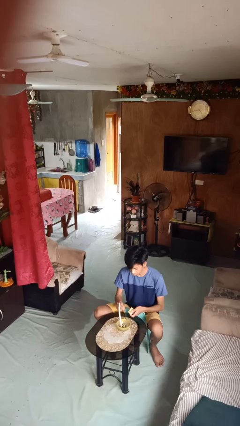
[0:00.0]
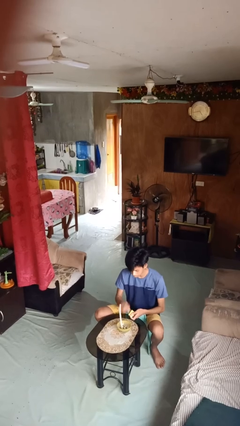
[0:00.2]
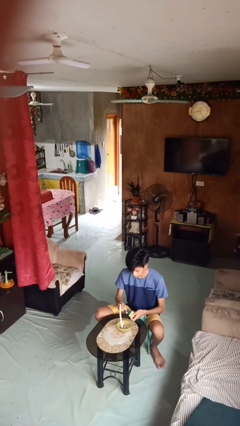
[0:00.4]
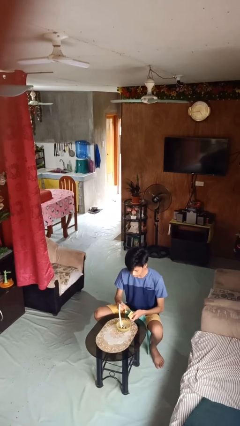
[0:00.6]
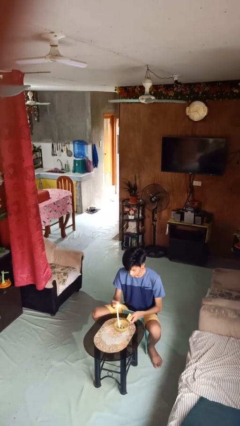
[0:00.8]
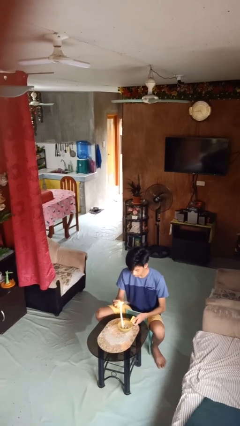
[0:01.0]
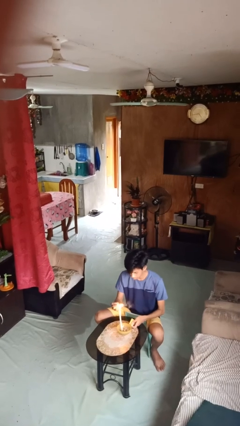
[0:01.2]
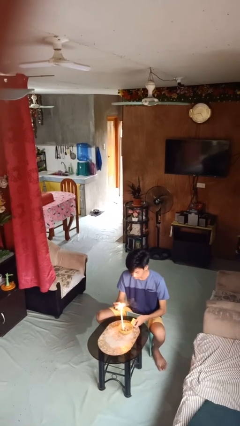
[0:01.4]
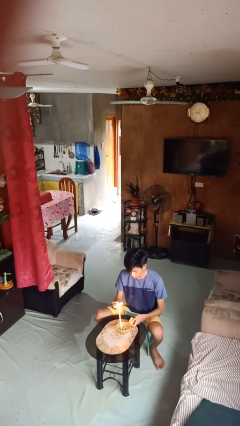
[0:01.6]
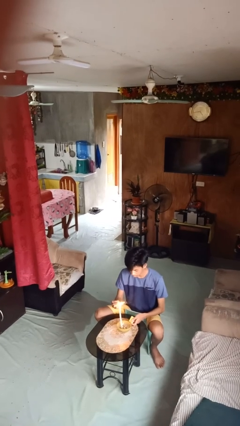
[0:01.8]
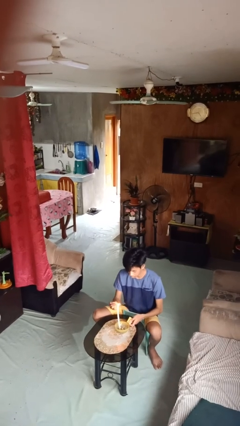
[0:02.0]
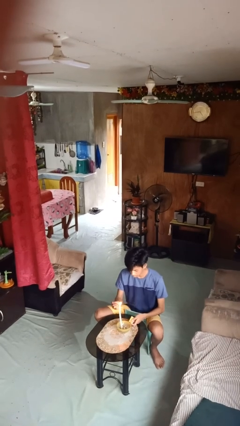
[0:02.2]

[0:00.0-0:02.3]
person lights candle

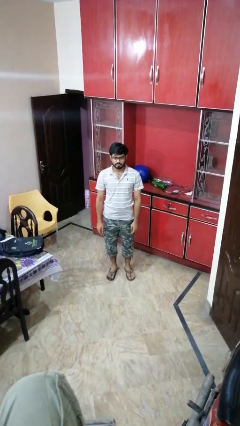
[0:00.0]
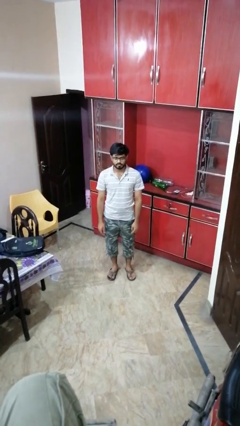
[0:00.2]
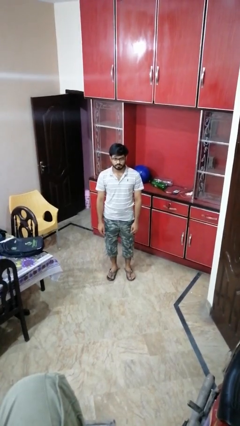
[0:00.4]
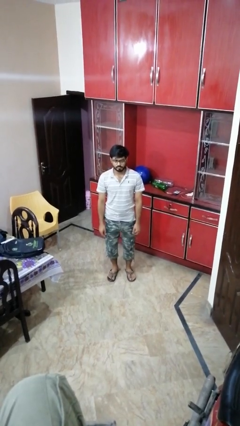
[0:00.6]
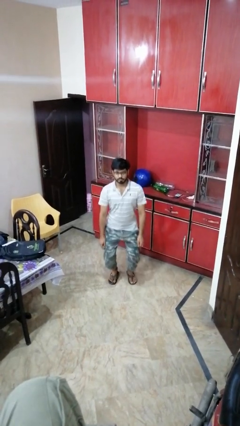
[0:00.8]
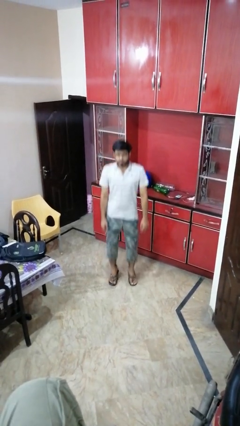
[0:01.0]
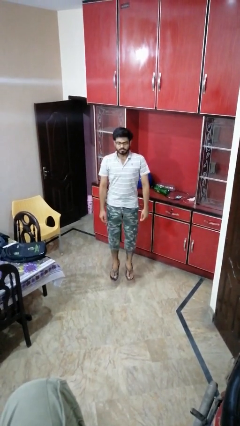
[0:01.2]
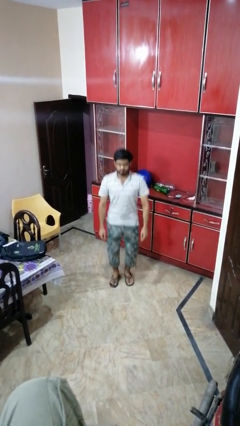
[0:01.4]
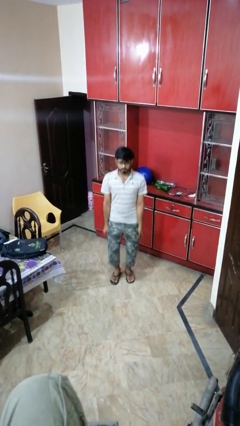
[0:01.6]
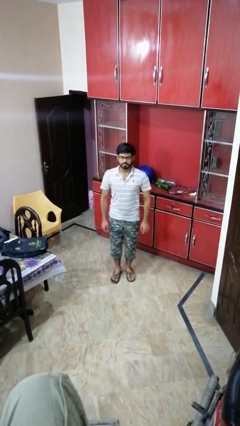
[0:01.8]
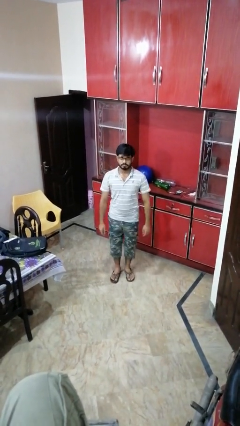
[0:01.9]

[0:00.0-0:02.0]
person jumps

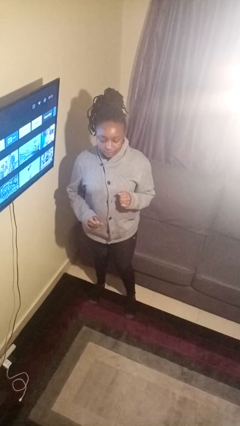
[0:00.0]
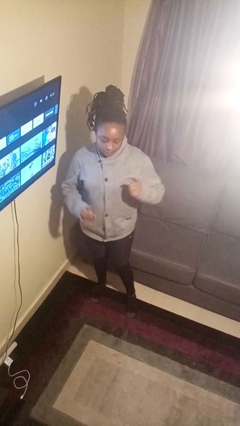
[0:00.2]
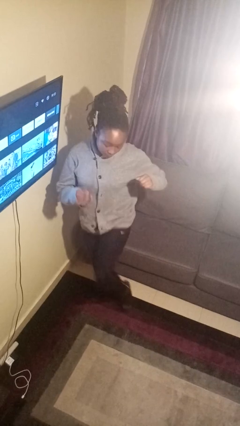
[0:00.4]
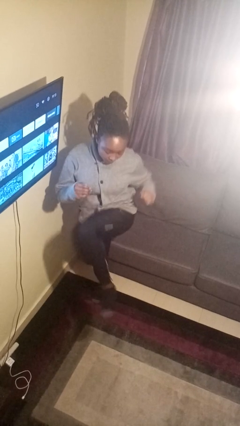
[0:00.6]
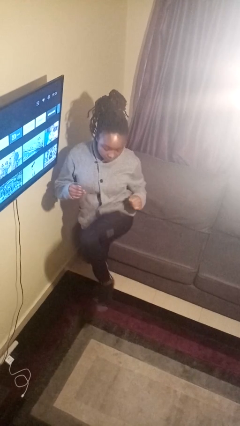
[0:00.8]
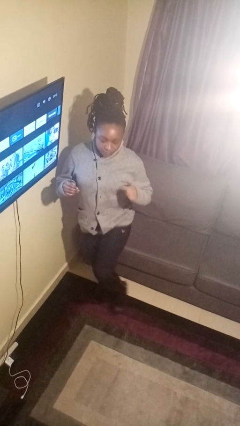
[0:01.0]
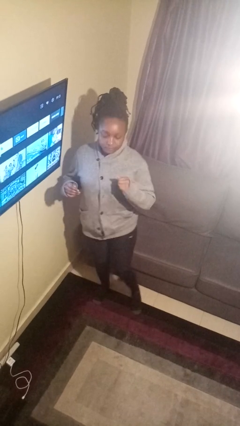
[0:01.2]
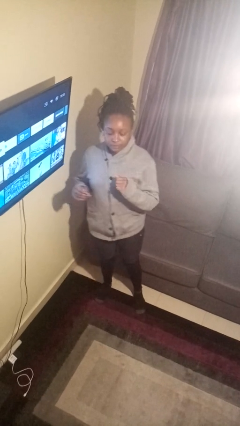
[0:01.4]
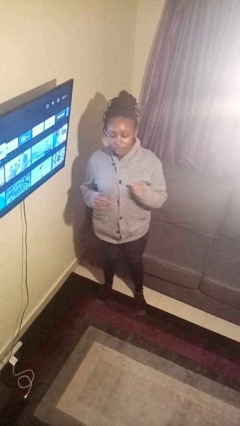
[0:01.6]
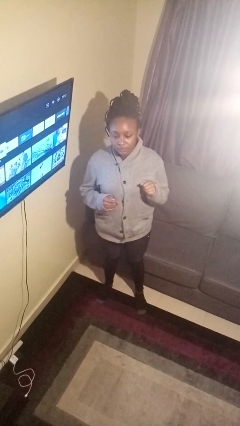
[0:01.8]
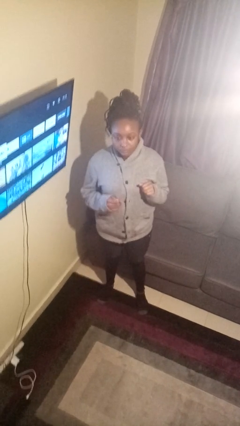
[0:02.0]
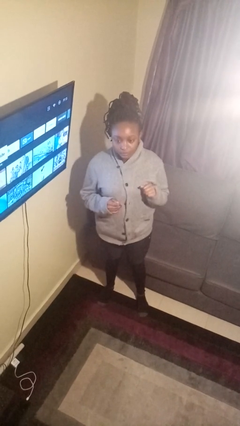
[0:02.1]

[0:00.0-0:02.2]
person karate kicks

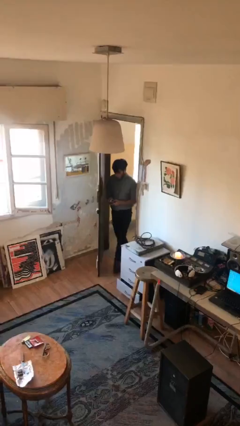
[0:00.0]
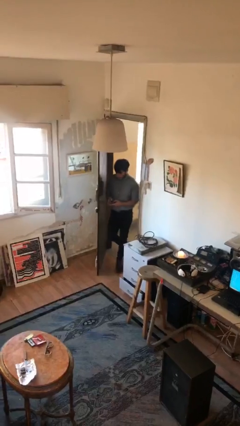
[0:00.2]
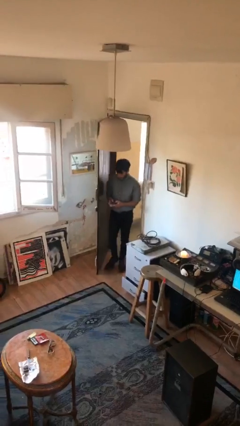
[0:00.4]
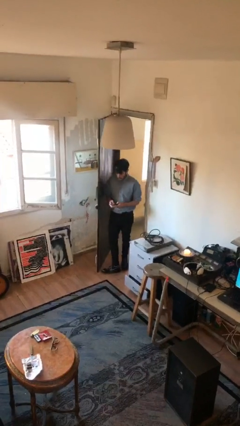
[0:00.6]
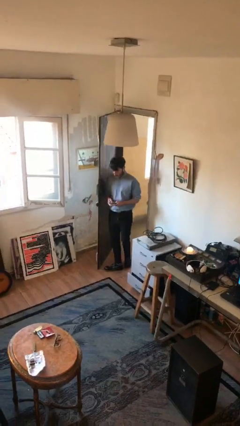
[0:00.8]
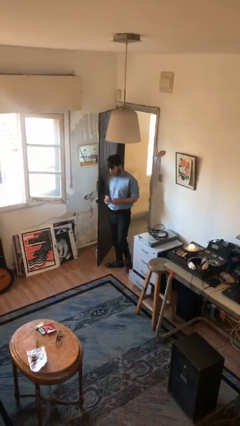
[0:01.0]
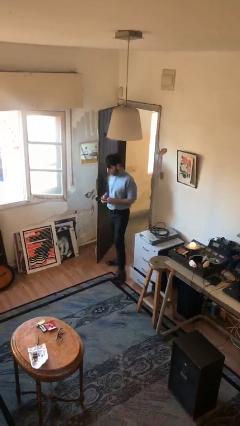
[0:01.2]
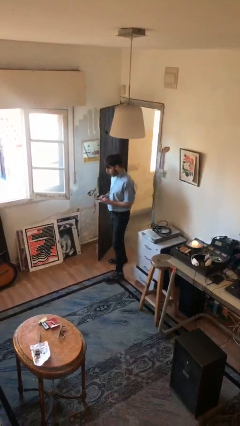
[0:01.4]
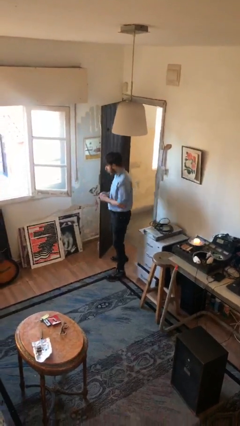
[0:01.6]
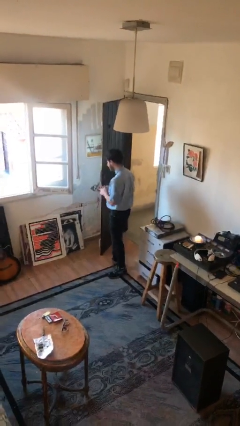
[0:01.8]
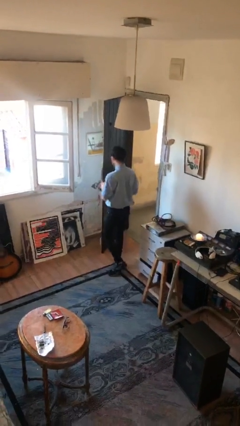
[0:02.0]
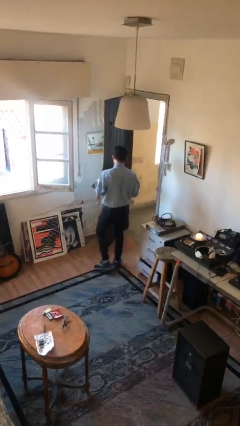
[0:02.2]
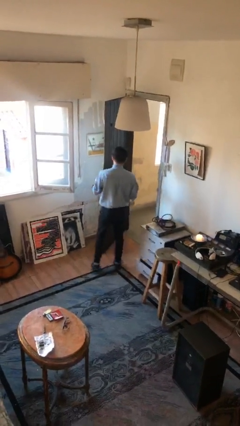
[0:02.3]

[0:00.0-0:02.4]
person enters scene through structure

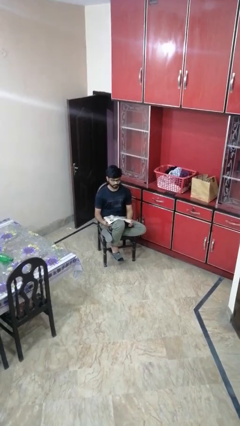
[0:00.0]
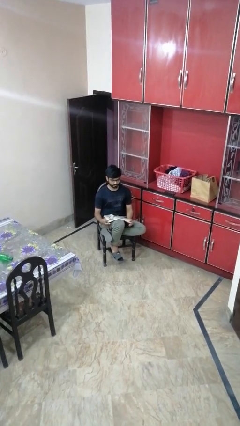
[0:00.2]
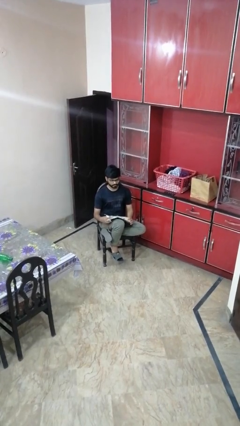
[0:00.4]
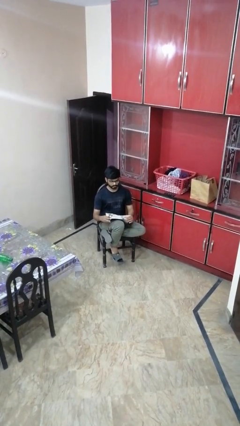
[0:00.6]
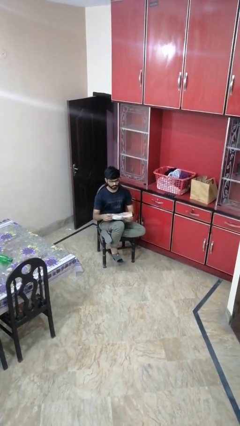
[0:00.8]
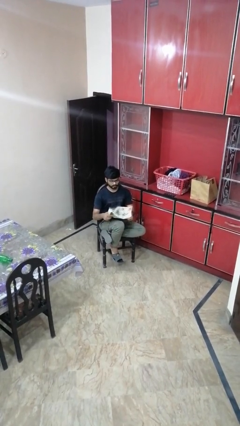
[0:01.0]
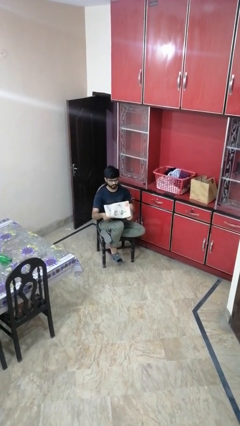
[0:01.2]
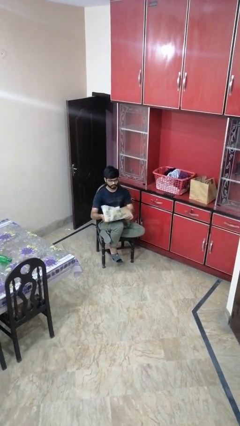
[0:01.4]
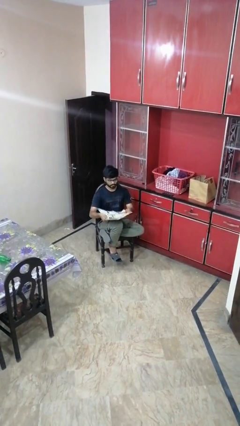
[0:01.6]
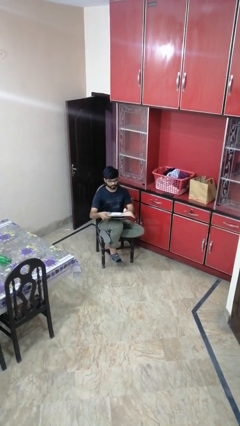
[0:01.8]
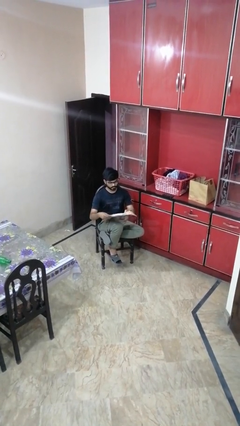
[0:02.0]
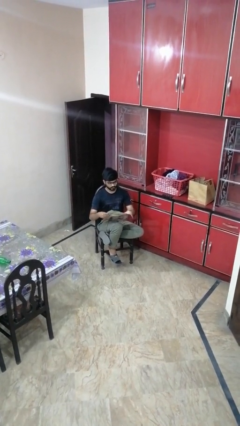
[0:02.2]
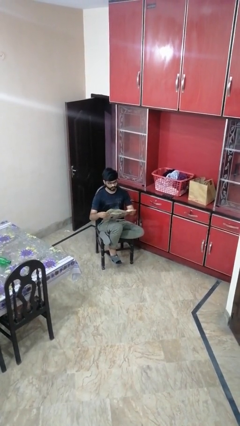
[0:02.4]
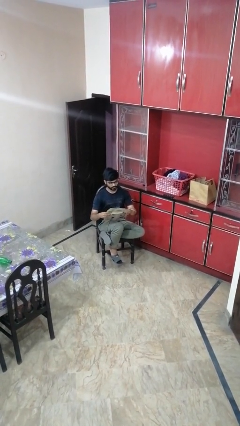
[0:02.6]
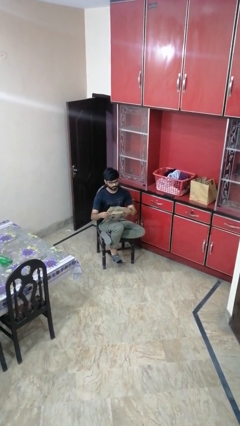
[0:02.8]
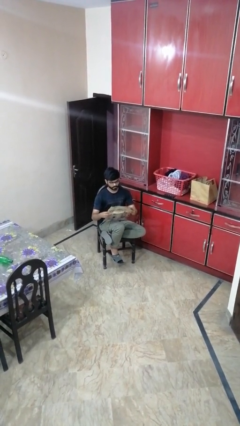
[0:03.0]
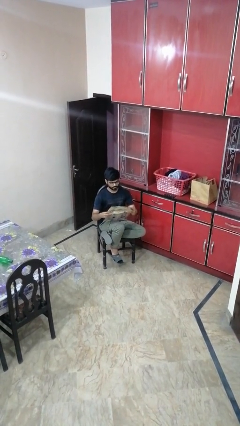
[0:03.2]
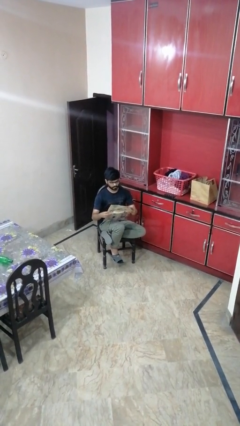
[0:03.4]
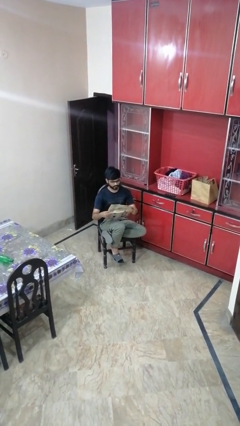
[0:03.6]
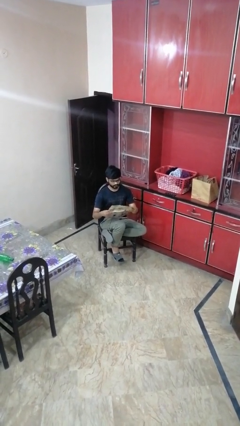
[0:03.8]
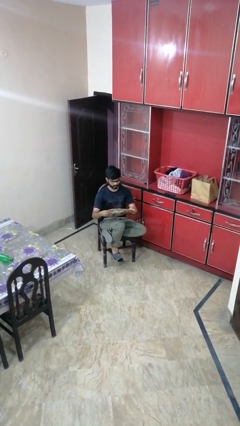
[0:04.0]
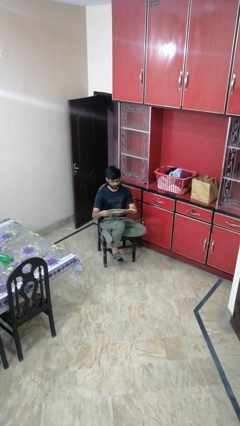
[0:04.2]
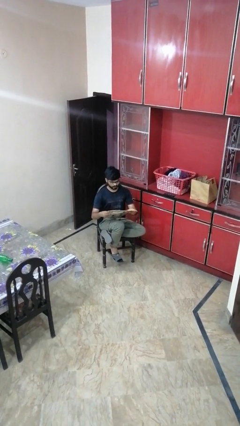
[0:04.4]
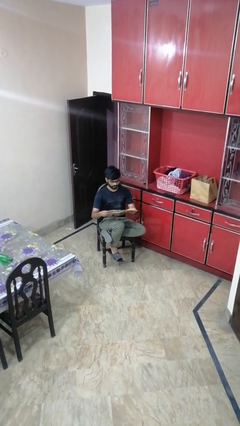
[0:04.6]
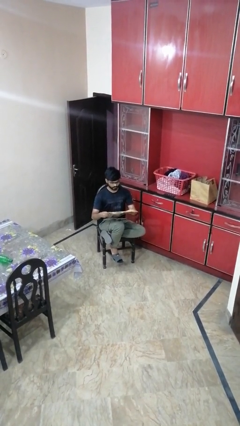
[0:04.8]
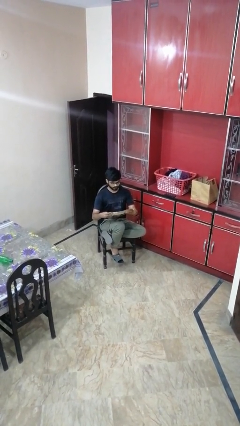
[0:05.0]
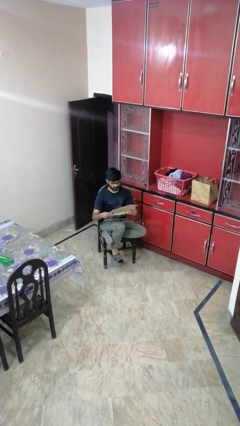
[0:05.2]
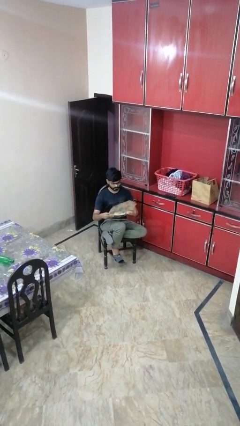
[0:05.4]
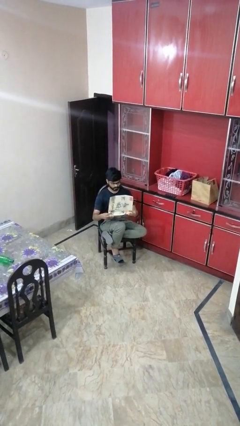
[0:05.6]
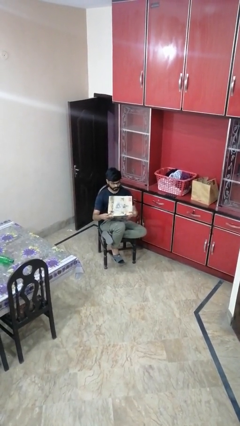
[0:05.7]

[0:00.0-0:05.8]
person reads newspaper

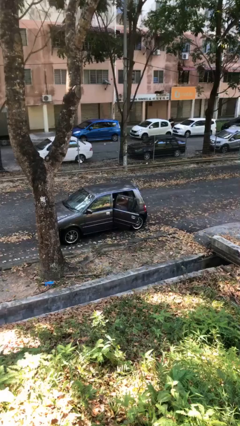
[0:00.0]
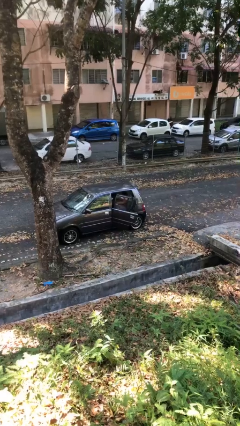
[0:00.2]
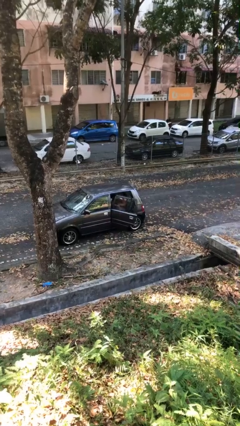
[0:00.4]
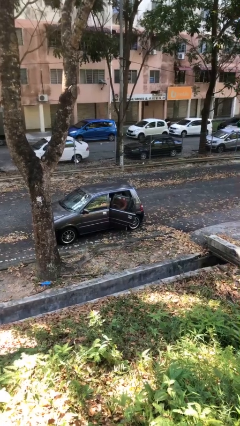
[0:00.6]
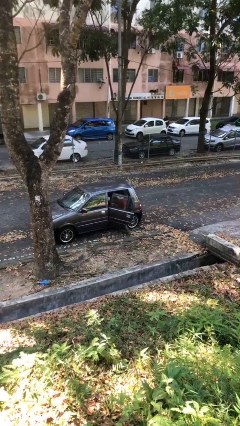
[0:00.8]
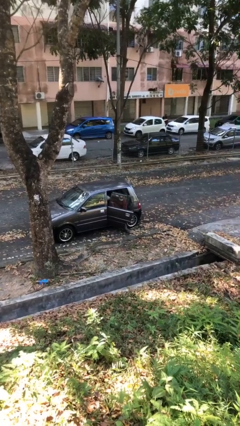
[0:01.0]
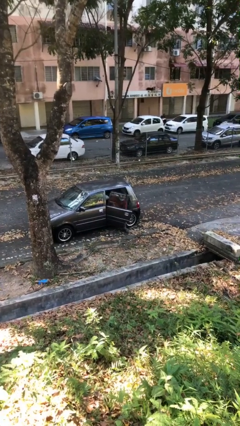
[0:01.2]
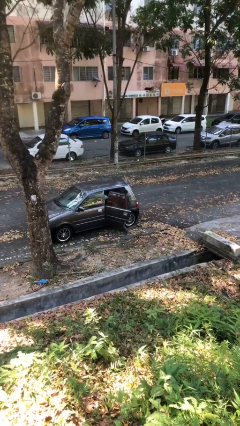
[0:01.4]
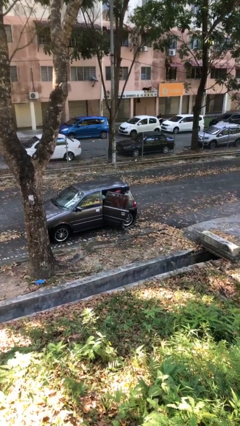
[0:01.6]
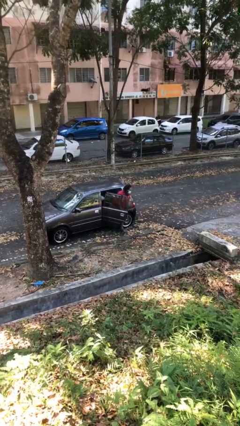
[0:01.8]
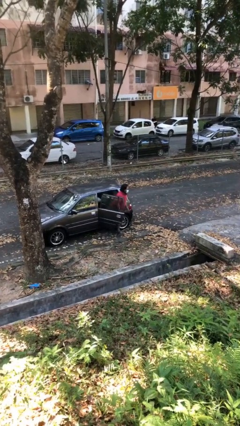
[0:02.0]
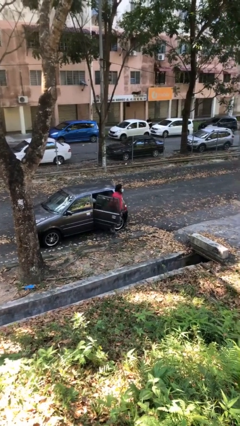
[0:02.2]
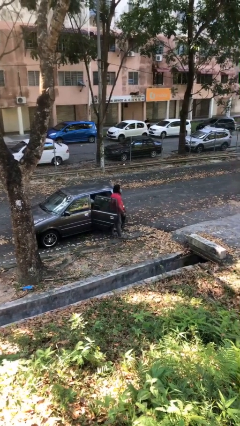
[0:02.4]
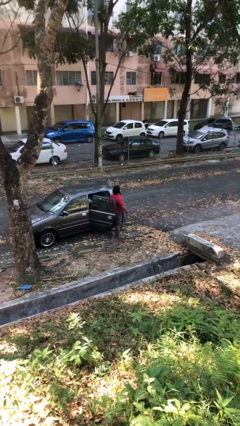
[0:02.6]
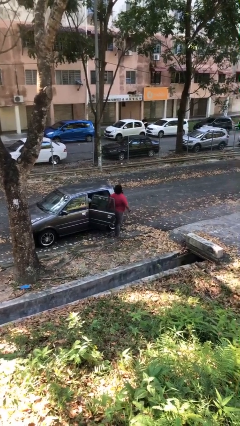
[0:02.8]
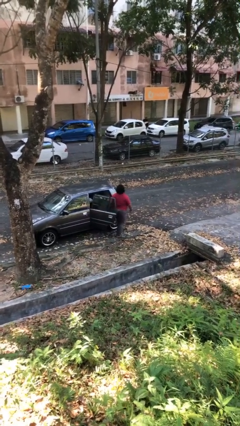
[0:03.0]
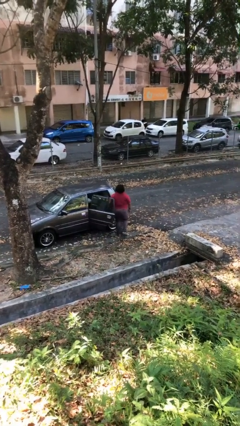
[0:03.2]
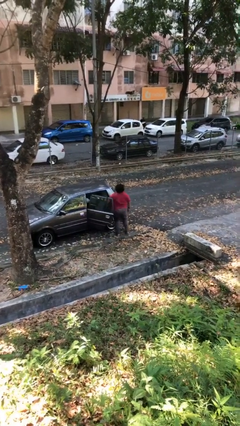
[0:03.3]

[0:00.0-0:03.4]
person exits car
